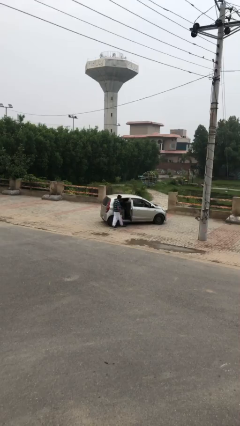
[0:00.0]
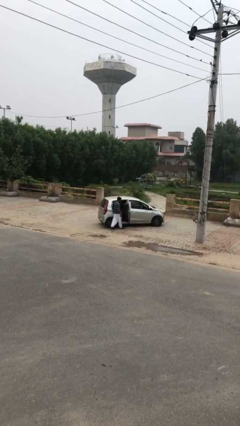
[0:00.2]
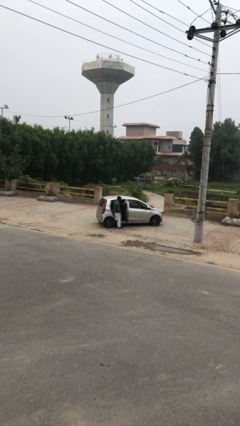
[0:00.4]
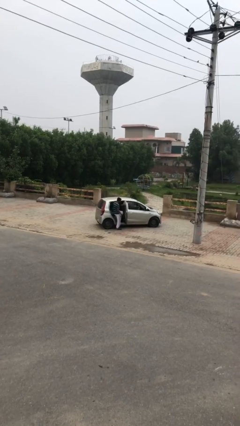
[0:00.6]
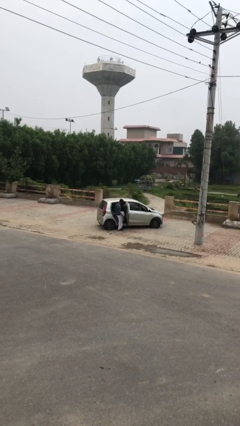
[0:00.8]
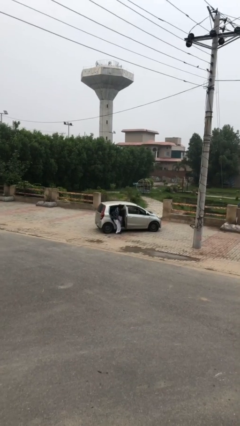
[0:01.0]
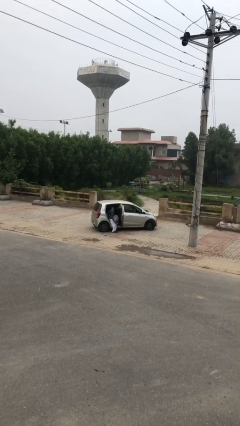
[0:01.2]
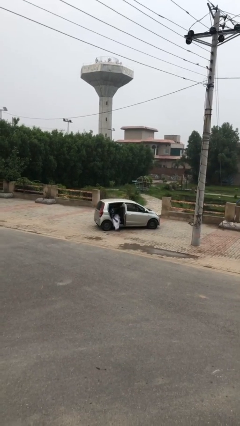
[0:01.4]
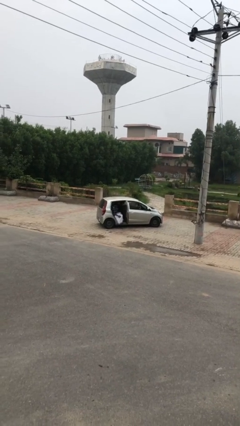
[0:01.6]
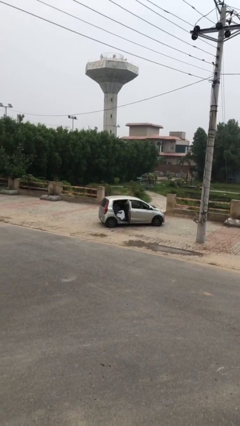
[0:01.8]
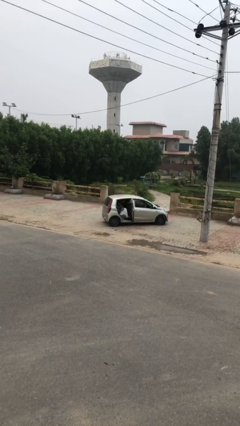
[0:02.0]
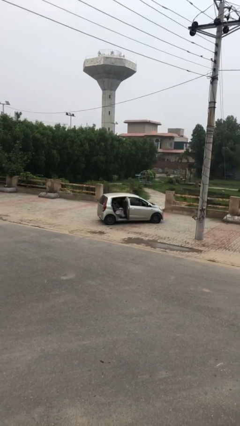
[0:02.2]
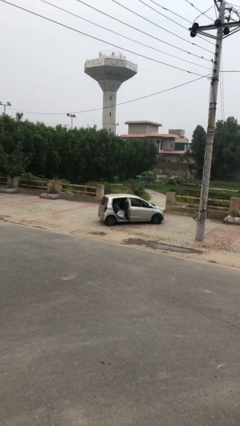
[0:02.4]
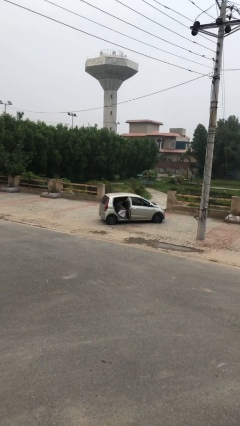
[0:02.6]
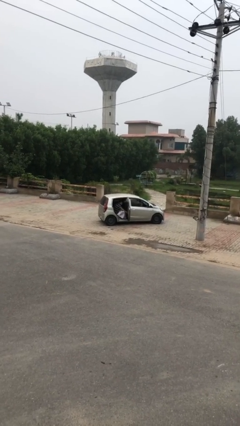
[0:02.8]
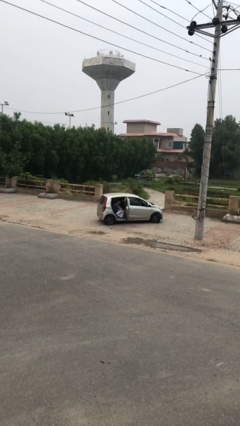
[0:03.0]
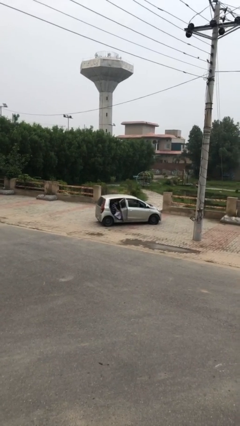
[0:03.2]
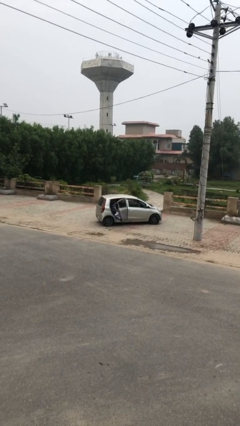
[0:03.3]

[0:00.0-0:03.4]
person enters car

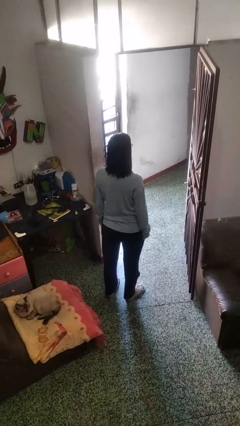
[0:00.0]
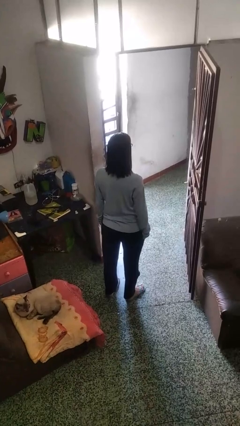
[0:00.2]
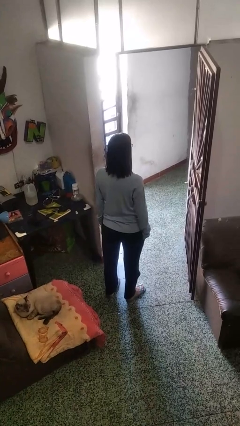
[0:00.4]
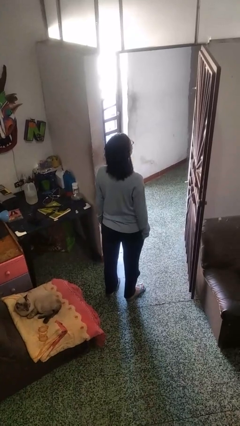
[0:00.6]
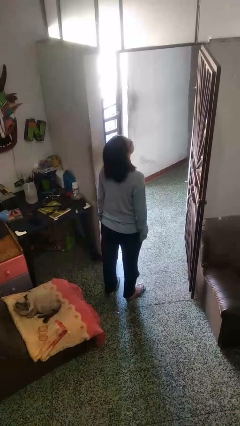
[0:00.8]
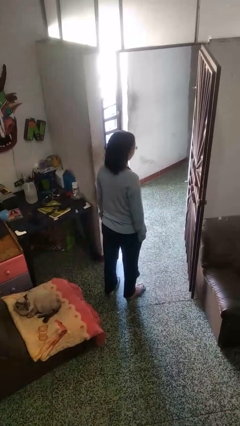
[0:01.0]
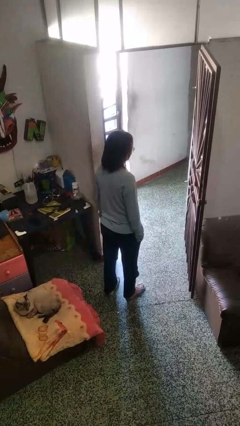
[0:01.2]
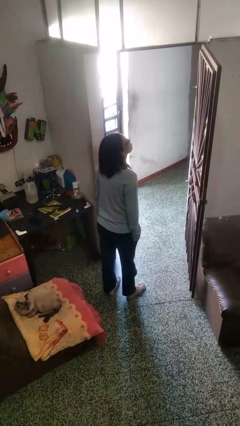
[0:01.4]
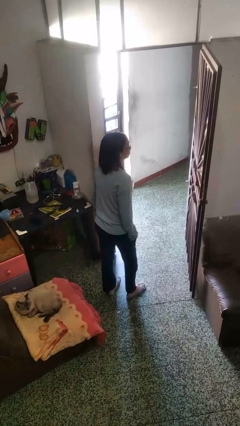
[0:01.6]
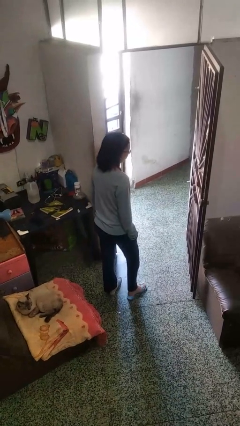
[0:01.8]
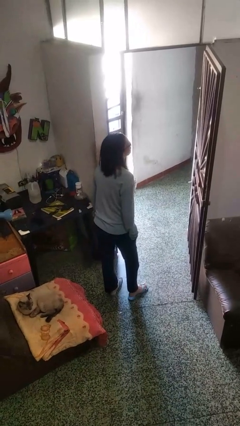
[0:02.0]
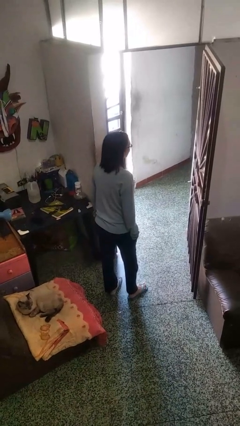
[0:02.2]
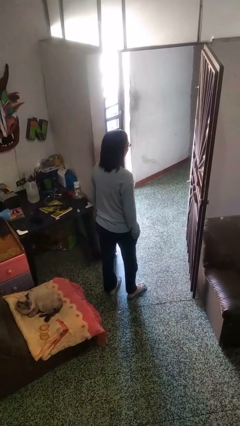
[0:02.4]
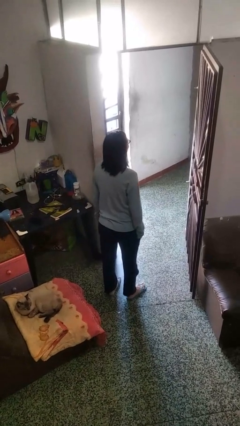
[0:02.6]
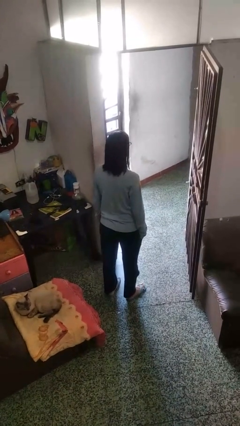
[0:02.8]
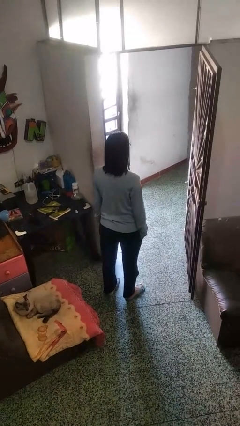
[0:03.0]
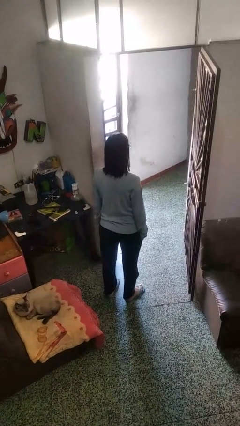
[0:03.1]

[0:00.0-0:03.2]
person nods head

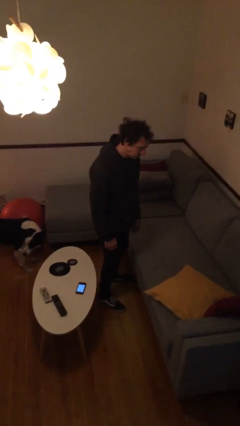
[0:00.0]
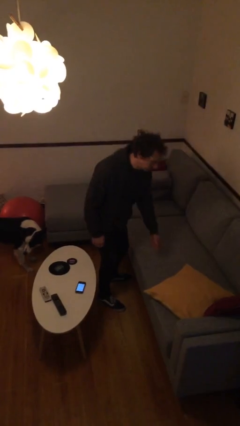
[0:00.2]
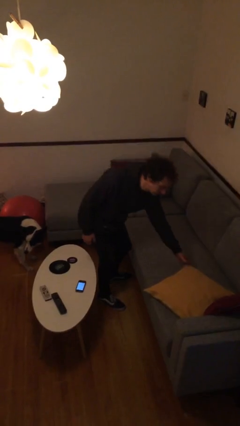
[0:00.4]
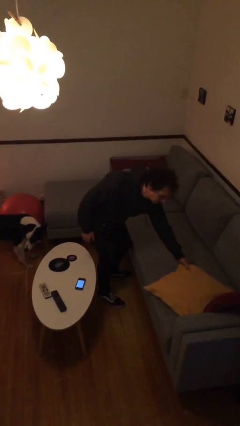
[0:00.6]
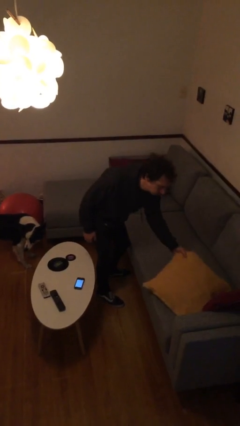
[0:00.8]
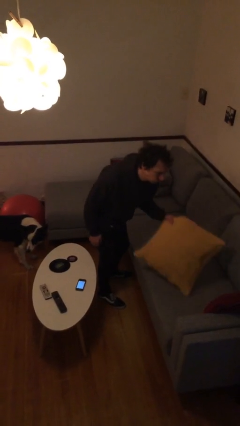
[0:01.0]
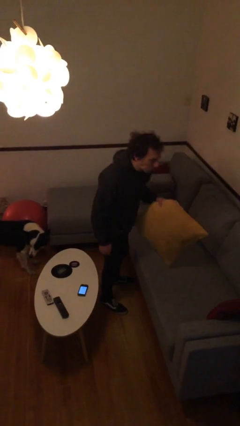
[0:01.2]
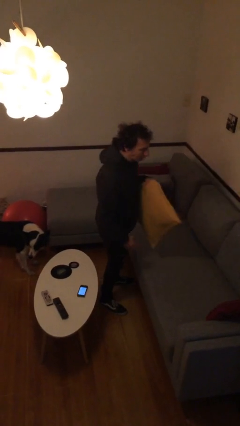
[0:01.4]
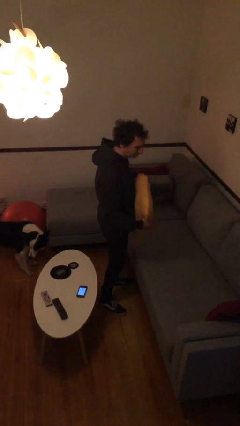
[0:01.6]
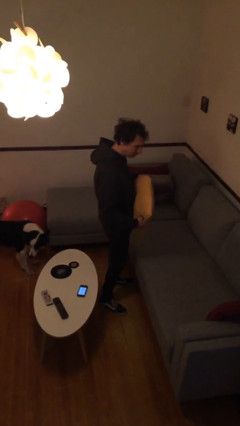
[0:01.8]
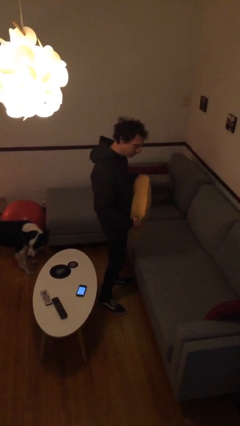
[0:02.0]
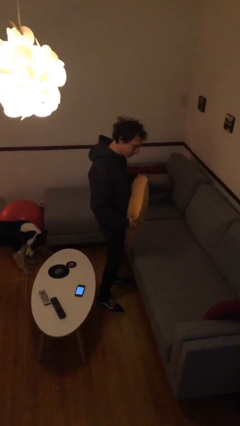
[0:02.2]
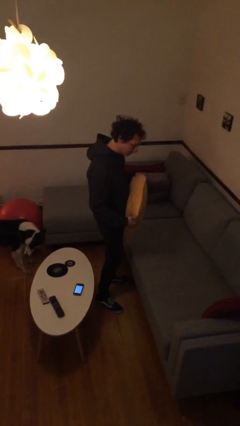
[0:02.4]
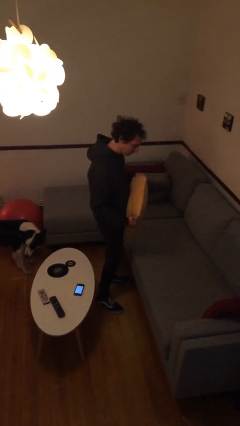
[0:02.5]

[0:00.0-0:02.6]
person picks up object from couch

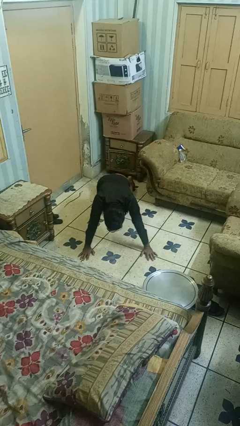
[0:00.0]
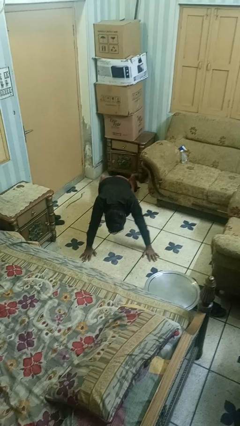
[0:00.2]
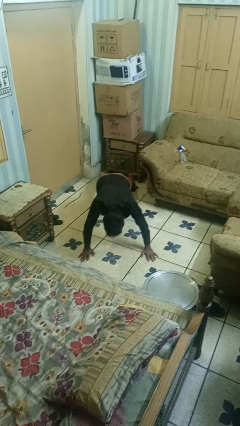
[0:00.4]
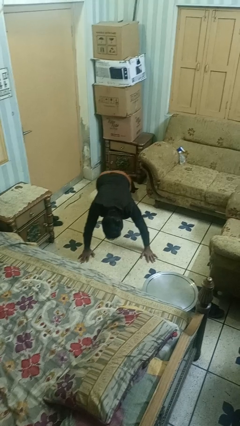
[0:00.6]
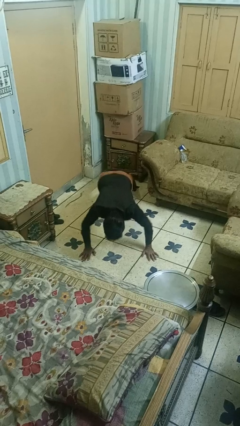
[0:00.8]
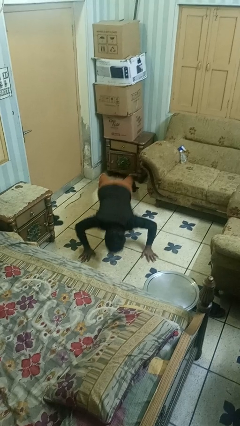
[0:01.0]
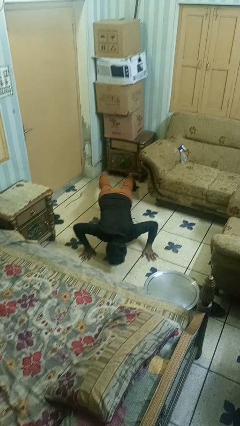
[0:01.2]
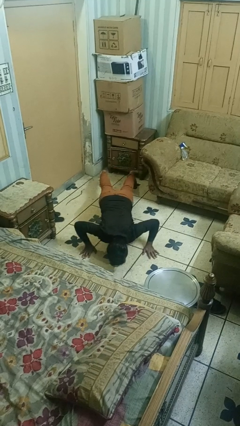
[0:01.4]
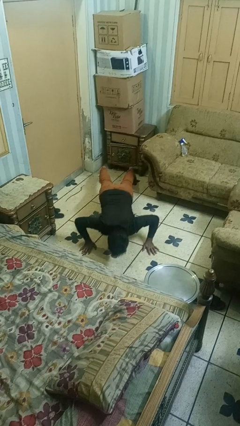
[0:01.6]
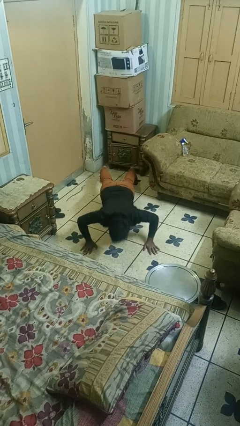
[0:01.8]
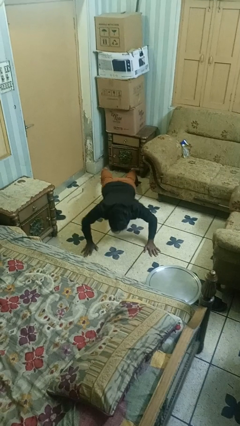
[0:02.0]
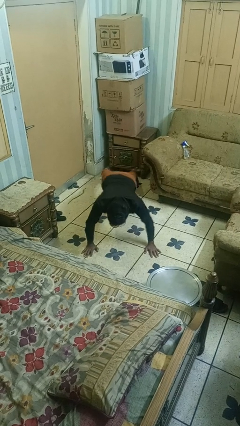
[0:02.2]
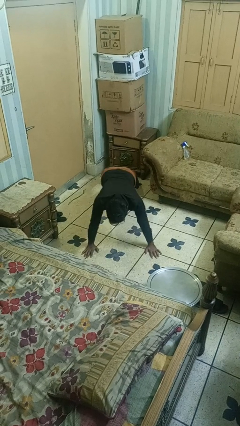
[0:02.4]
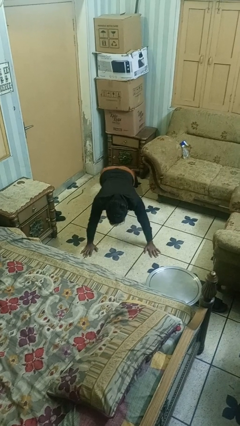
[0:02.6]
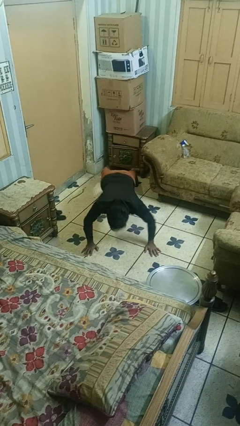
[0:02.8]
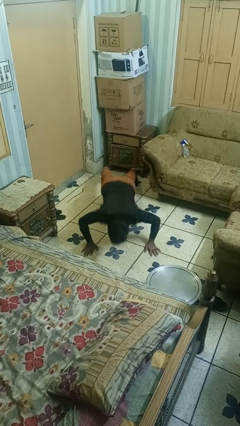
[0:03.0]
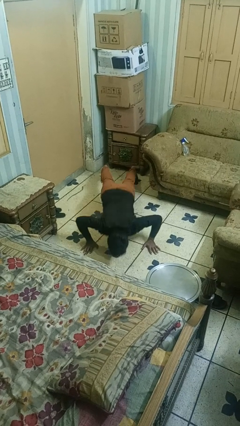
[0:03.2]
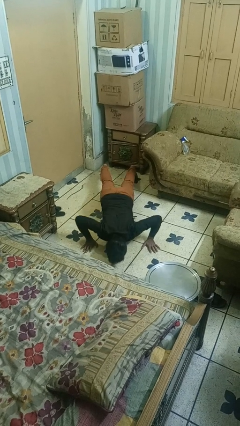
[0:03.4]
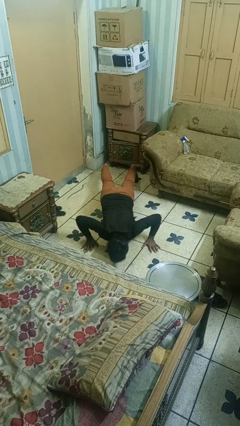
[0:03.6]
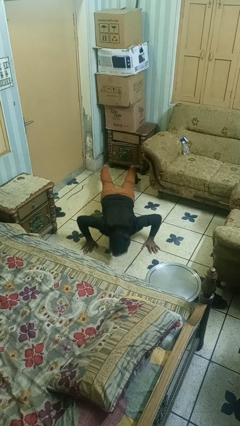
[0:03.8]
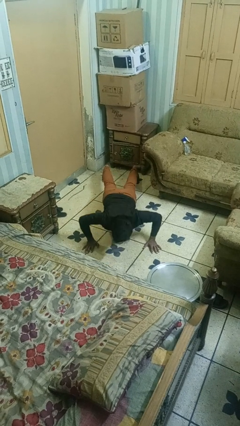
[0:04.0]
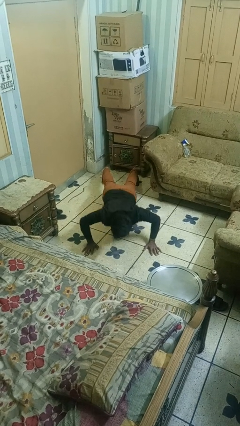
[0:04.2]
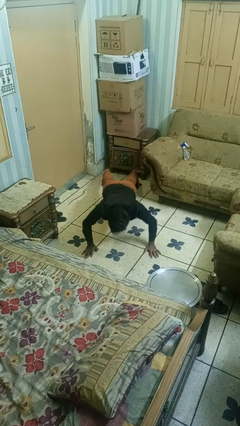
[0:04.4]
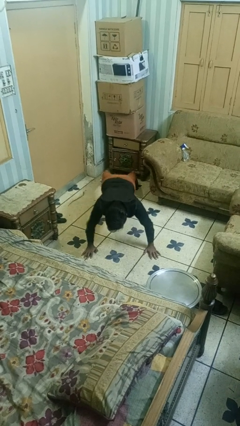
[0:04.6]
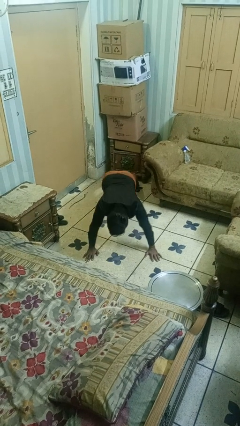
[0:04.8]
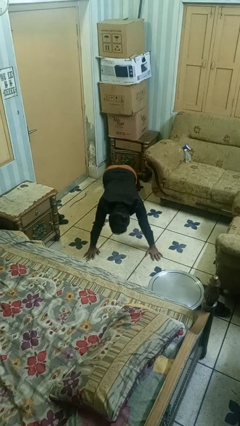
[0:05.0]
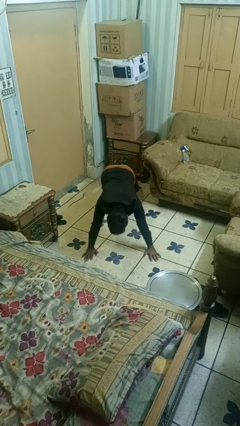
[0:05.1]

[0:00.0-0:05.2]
person exercises with pushup

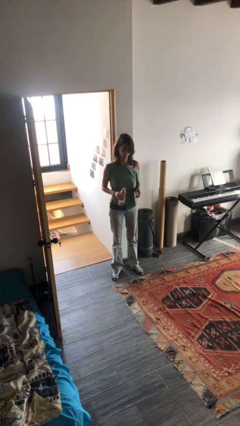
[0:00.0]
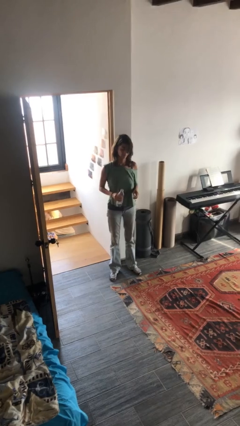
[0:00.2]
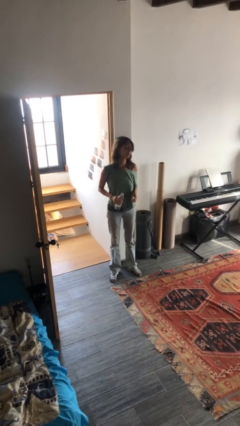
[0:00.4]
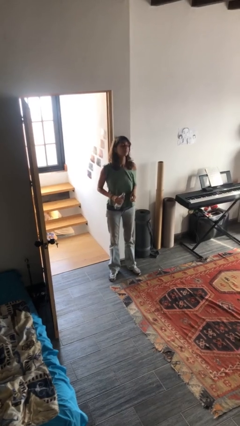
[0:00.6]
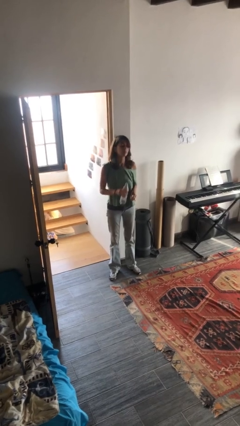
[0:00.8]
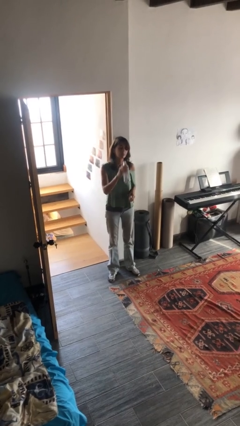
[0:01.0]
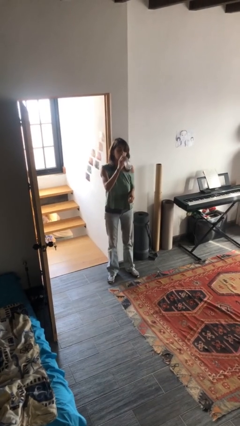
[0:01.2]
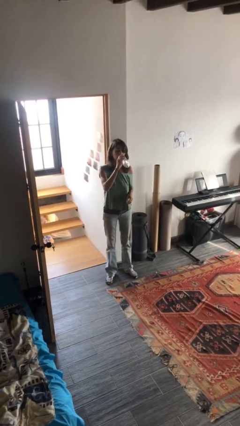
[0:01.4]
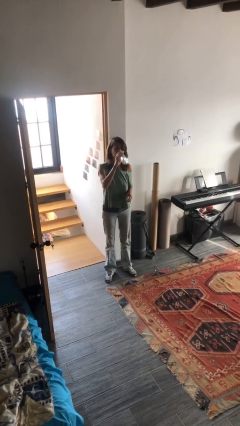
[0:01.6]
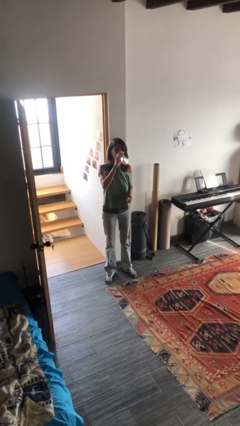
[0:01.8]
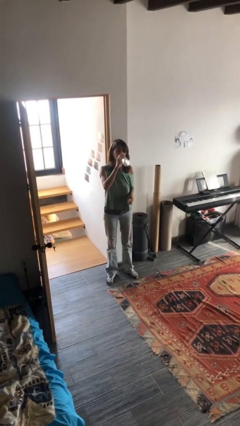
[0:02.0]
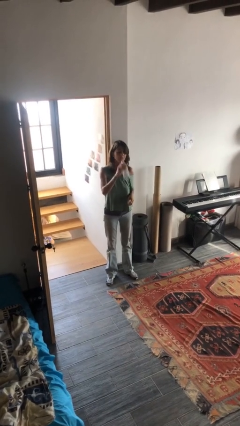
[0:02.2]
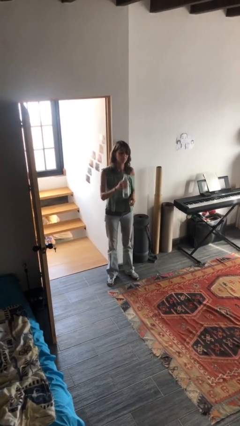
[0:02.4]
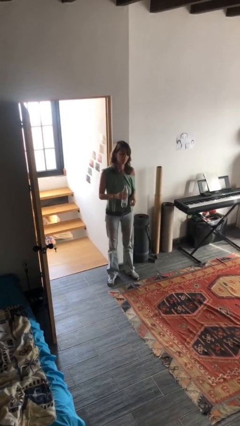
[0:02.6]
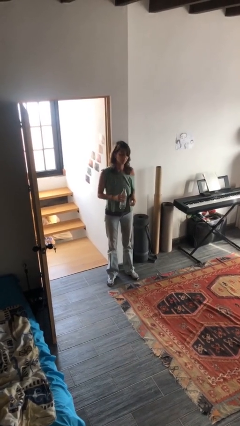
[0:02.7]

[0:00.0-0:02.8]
person drinks from bottle
